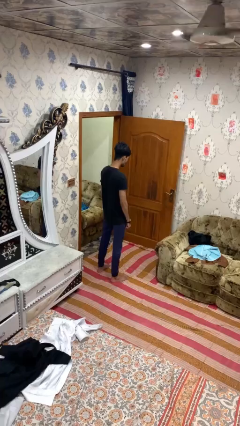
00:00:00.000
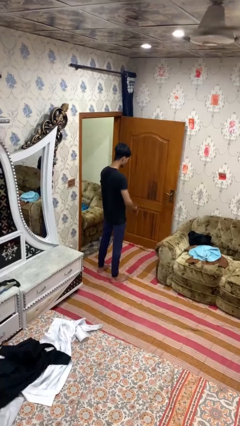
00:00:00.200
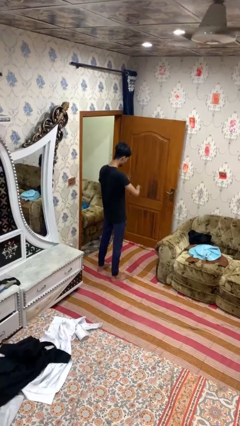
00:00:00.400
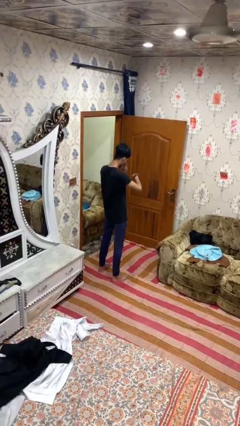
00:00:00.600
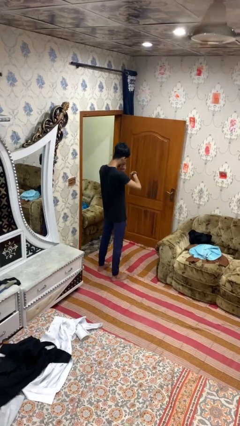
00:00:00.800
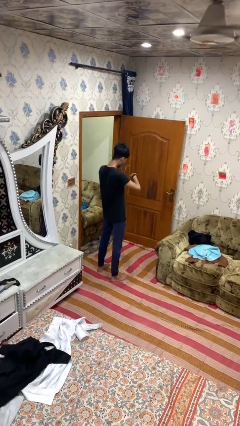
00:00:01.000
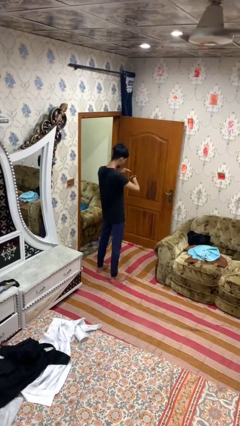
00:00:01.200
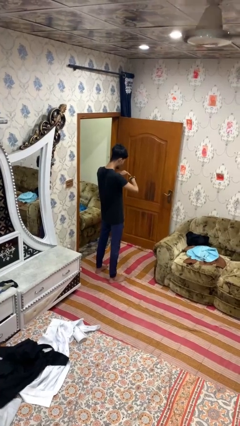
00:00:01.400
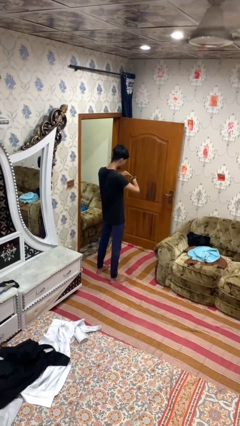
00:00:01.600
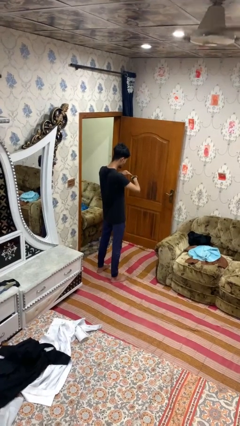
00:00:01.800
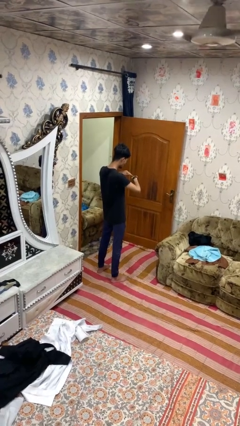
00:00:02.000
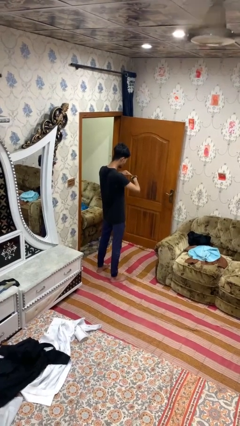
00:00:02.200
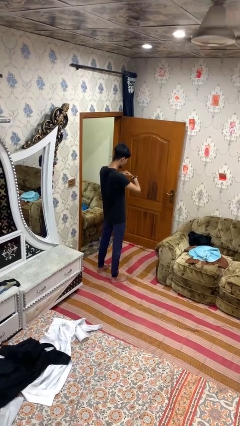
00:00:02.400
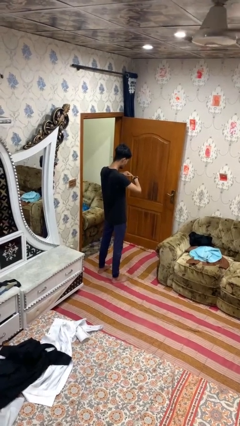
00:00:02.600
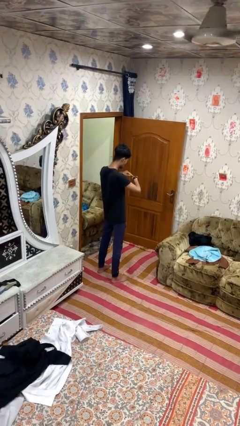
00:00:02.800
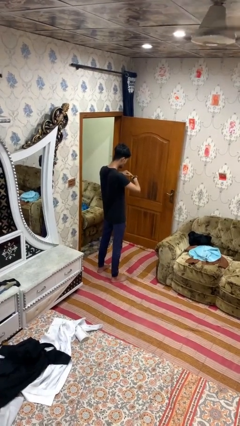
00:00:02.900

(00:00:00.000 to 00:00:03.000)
person gestures watch closely

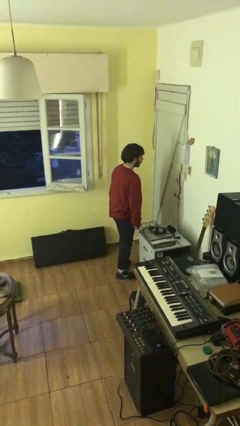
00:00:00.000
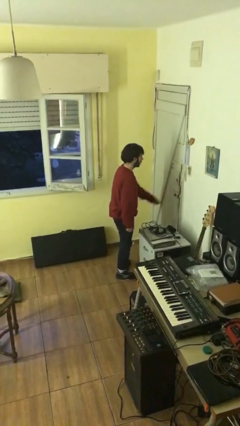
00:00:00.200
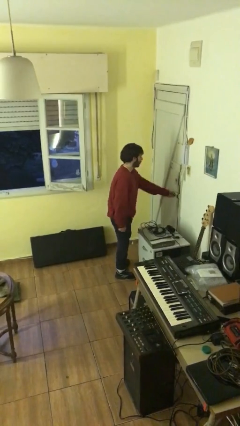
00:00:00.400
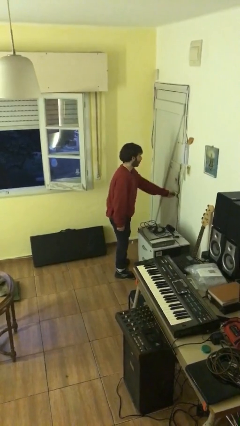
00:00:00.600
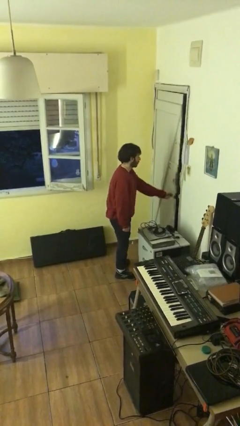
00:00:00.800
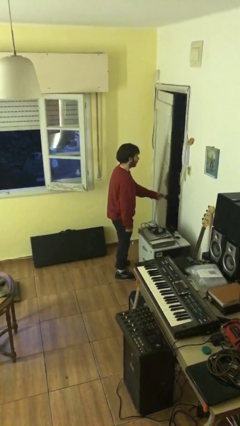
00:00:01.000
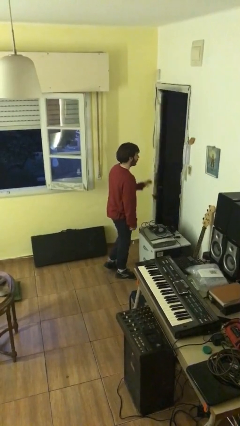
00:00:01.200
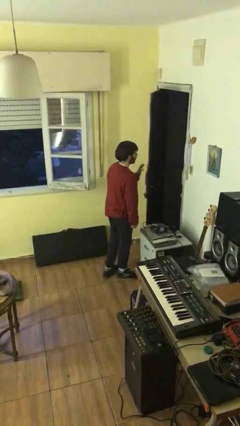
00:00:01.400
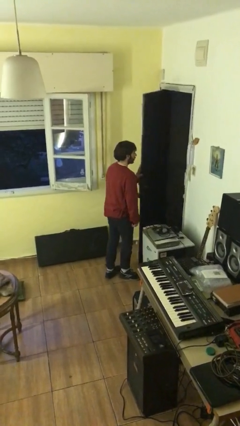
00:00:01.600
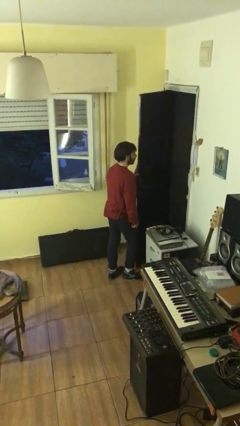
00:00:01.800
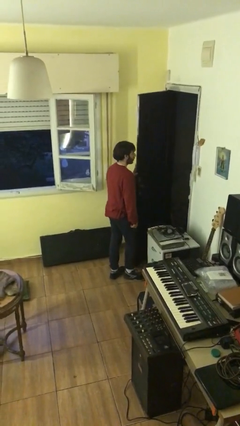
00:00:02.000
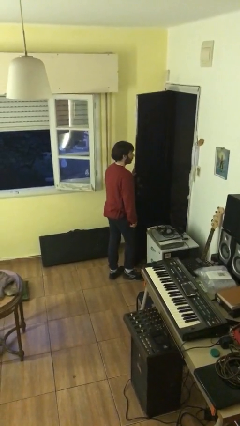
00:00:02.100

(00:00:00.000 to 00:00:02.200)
person opens facility door

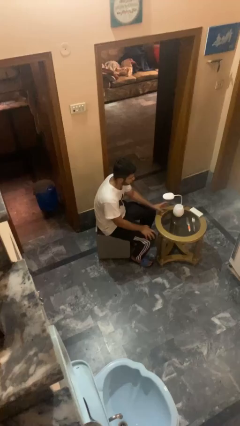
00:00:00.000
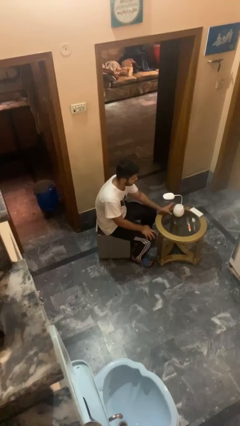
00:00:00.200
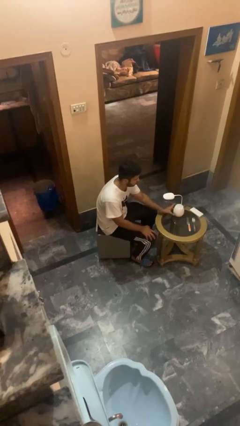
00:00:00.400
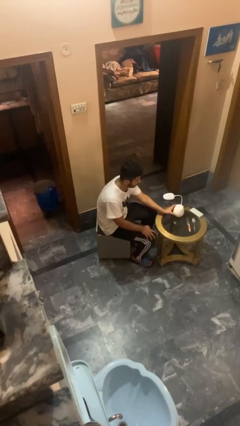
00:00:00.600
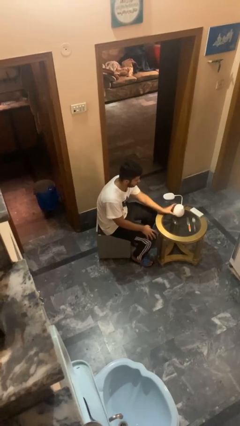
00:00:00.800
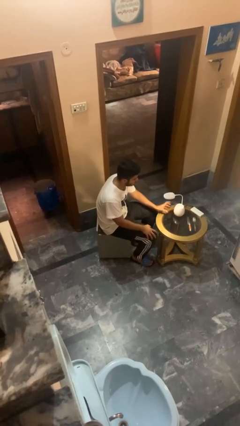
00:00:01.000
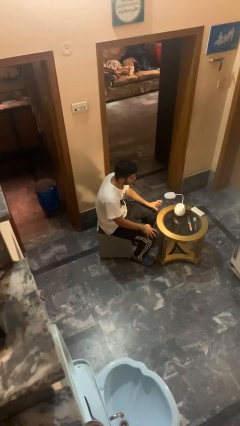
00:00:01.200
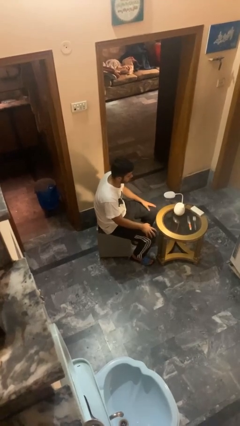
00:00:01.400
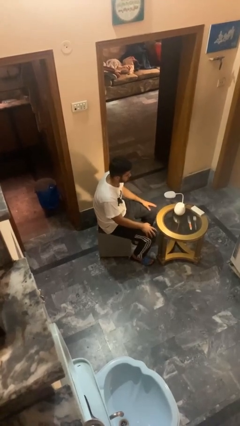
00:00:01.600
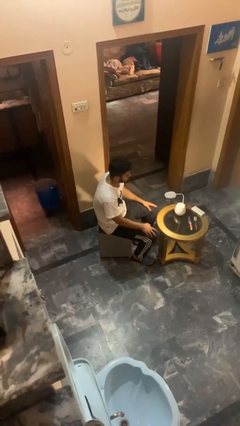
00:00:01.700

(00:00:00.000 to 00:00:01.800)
person turns on lamp

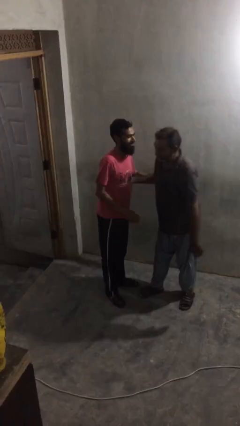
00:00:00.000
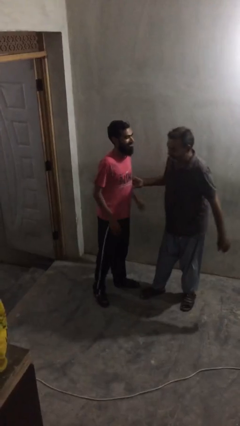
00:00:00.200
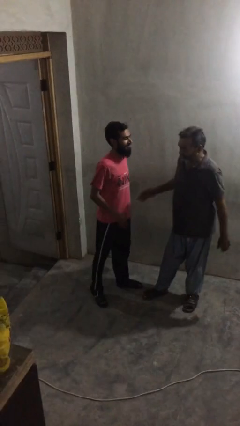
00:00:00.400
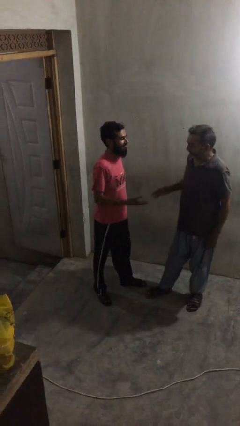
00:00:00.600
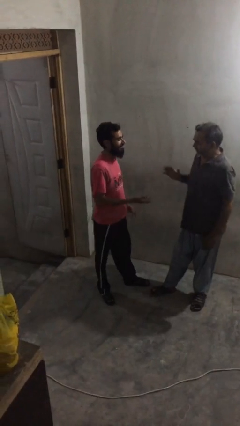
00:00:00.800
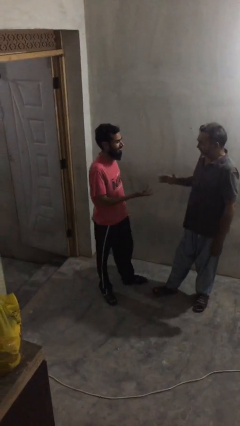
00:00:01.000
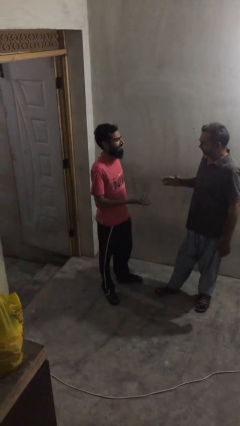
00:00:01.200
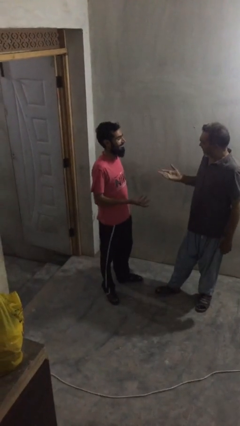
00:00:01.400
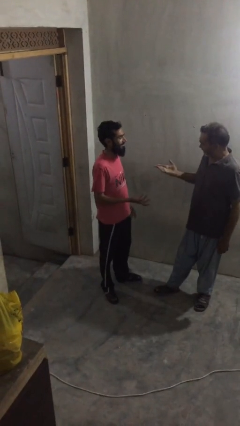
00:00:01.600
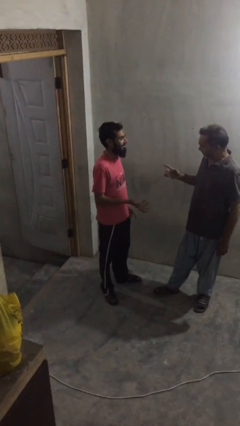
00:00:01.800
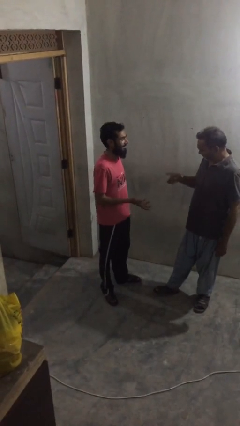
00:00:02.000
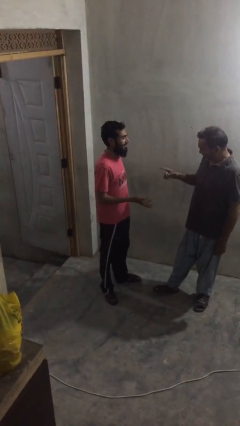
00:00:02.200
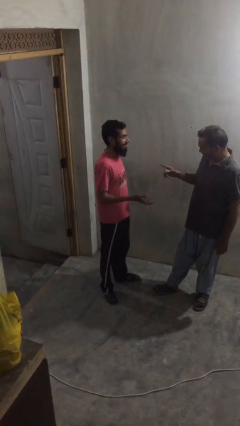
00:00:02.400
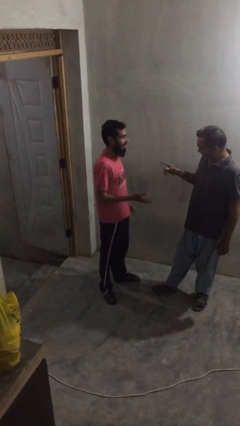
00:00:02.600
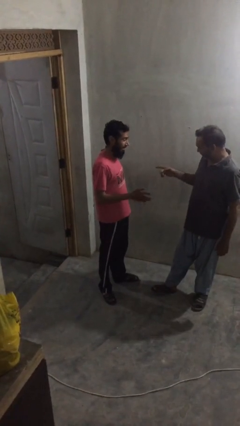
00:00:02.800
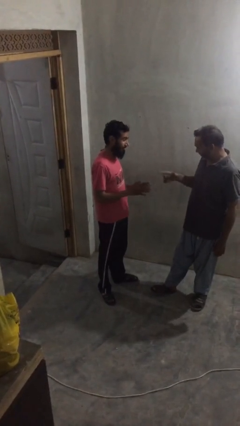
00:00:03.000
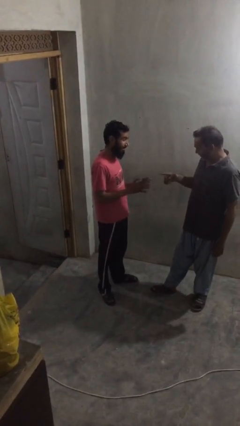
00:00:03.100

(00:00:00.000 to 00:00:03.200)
person talks to person

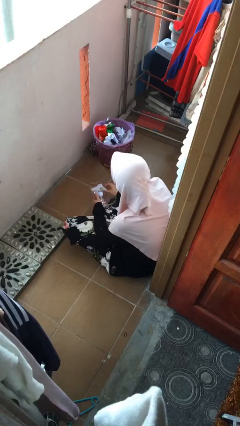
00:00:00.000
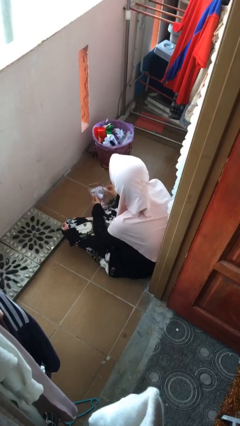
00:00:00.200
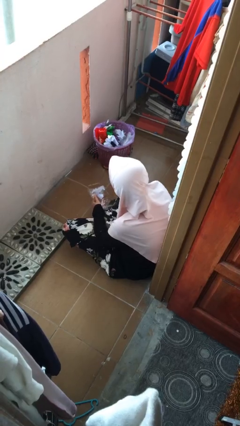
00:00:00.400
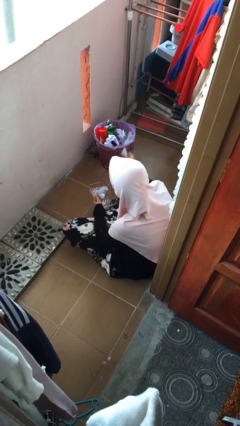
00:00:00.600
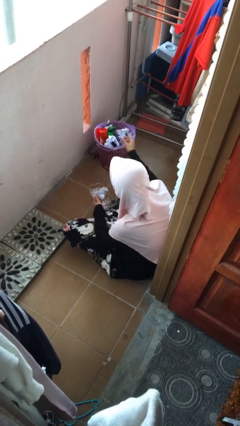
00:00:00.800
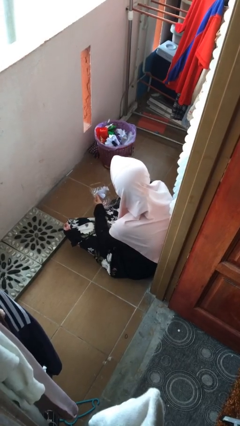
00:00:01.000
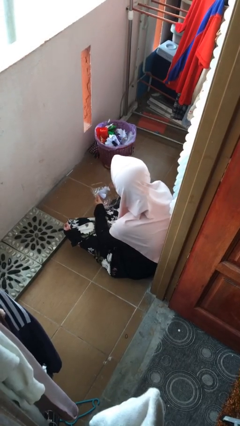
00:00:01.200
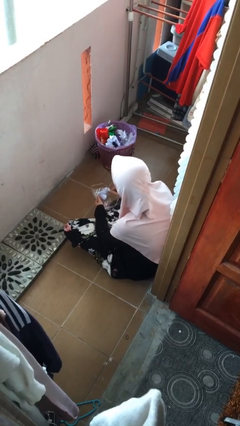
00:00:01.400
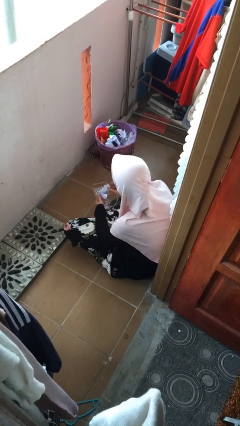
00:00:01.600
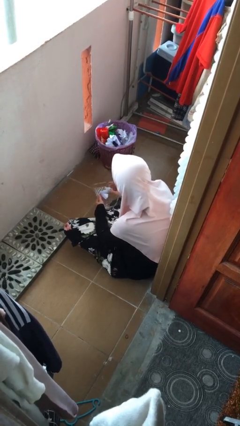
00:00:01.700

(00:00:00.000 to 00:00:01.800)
person discards trash

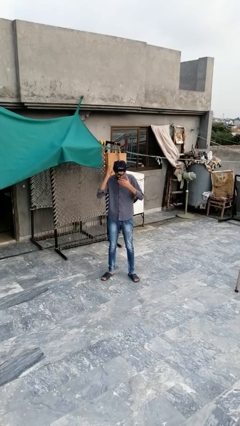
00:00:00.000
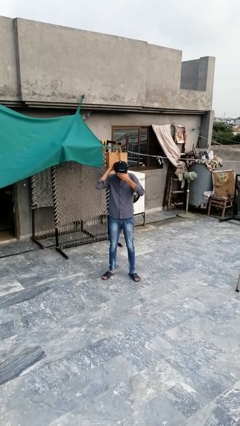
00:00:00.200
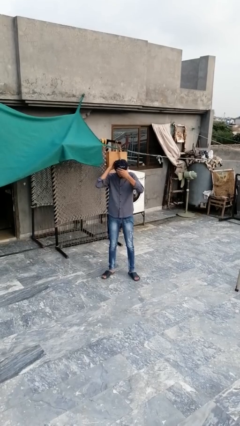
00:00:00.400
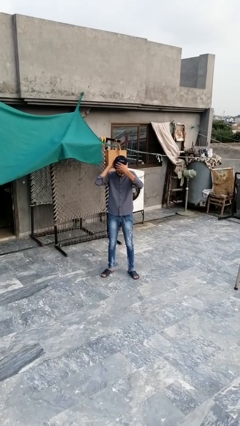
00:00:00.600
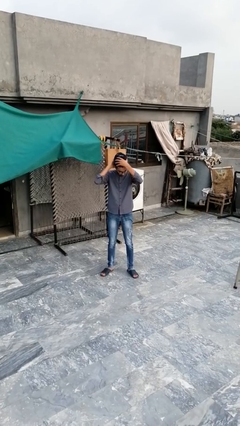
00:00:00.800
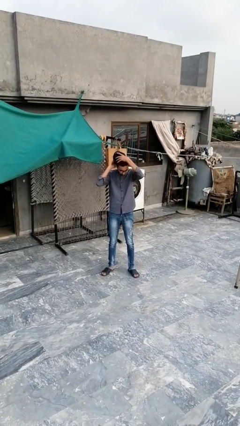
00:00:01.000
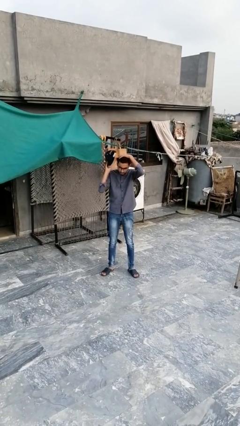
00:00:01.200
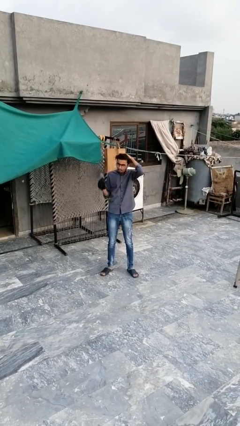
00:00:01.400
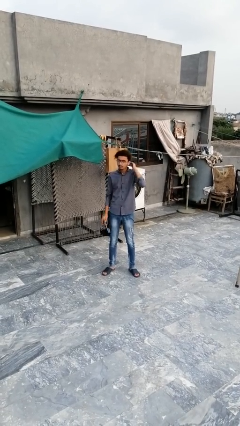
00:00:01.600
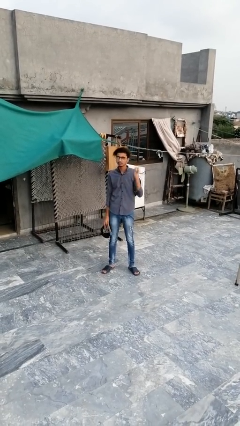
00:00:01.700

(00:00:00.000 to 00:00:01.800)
person takes off hat

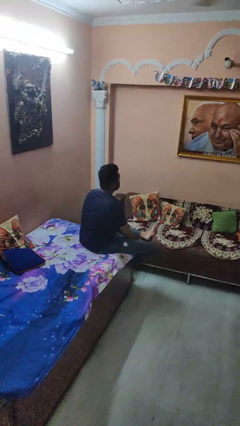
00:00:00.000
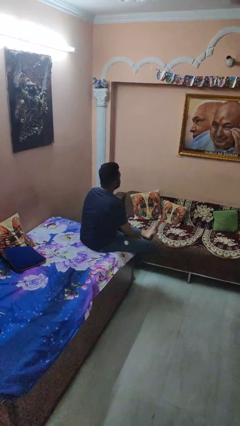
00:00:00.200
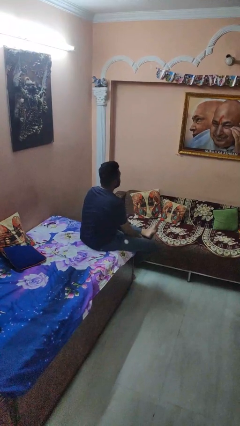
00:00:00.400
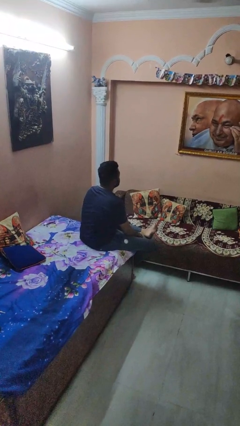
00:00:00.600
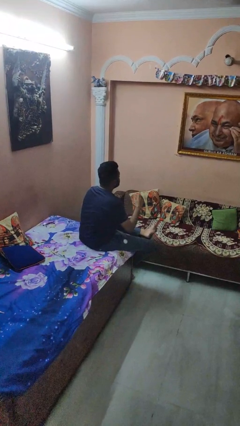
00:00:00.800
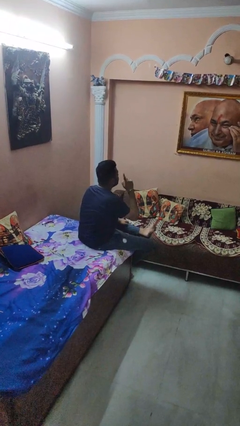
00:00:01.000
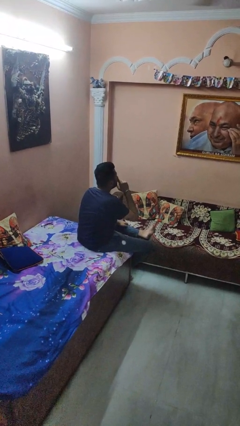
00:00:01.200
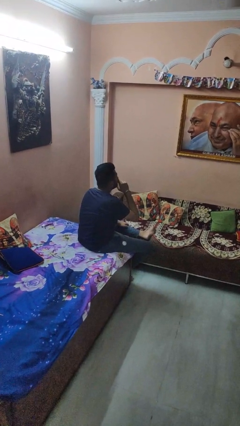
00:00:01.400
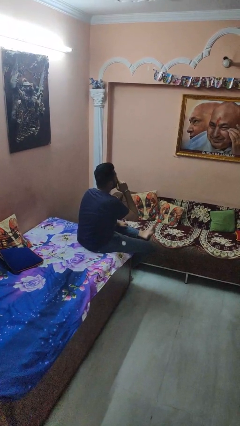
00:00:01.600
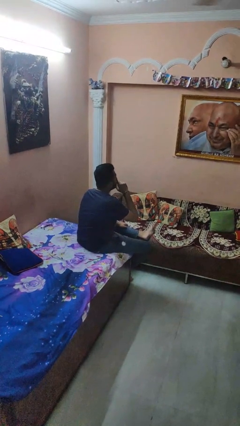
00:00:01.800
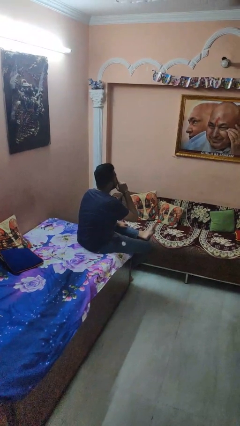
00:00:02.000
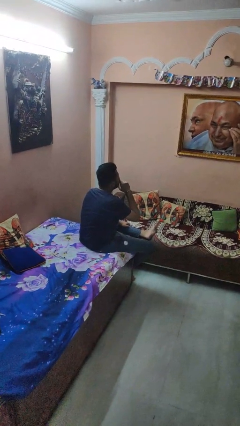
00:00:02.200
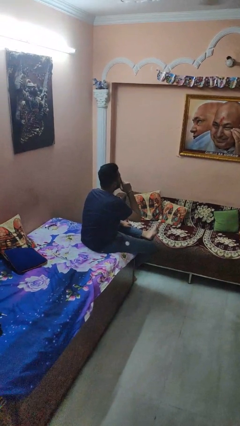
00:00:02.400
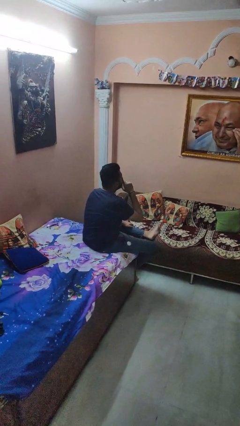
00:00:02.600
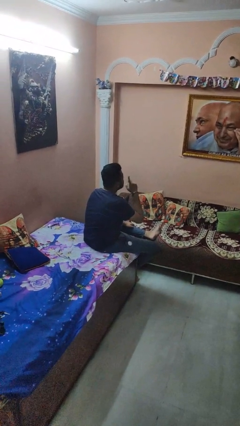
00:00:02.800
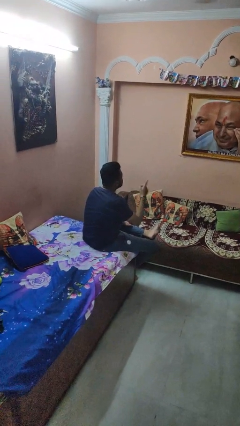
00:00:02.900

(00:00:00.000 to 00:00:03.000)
person gestures be quiet

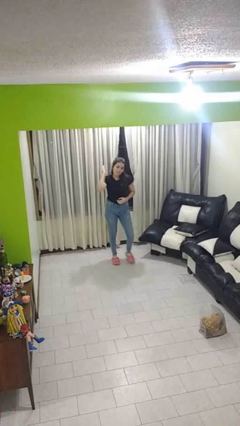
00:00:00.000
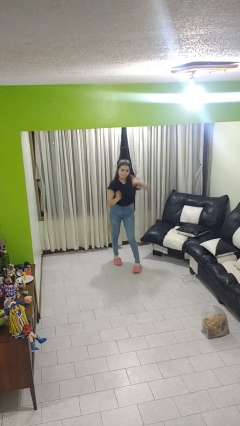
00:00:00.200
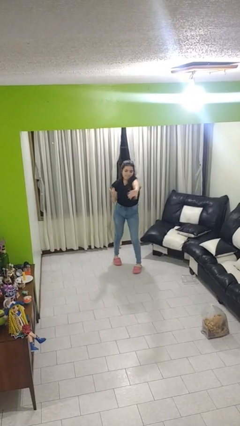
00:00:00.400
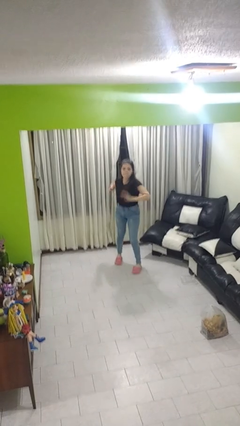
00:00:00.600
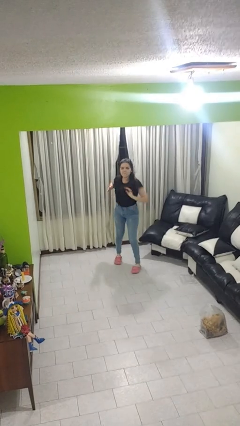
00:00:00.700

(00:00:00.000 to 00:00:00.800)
person karate chop
